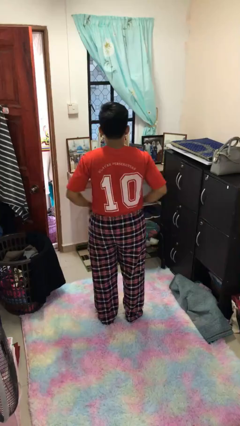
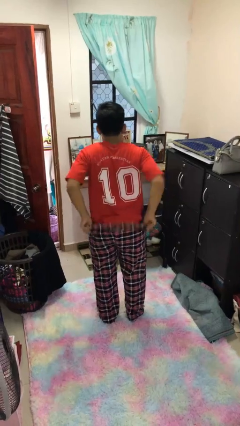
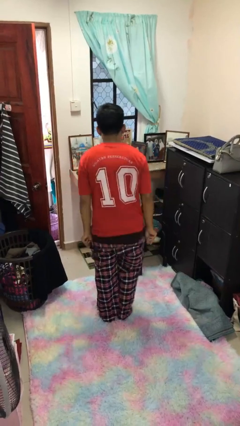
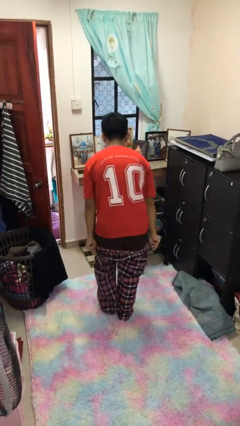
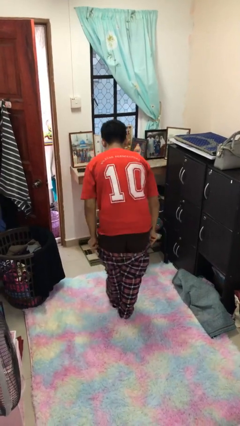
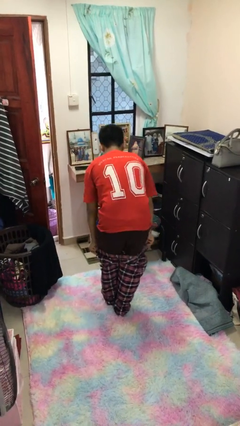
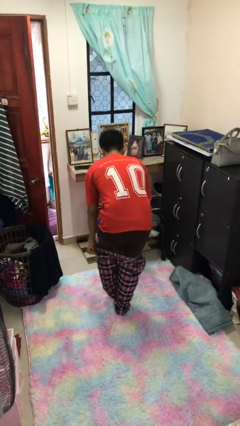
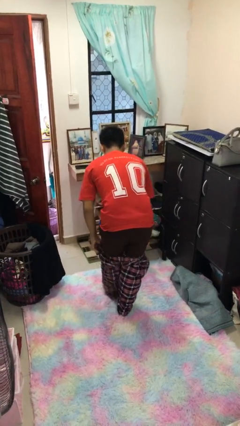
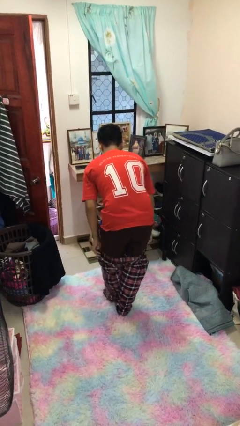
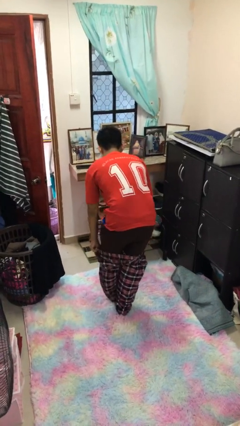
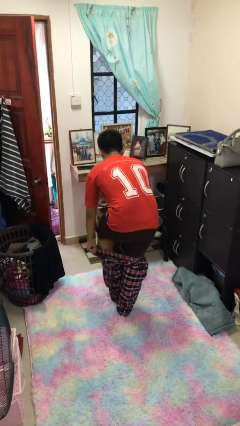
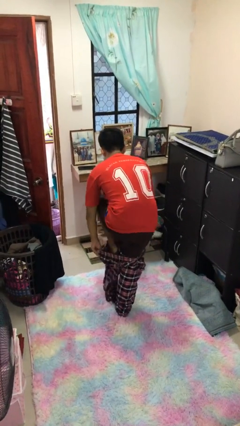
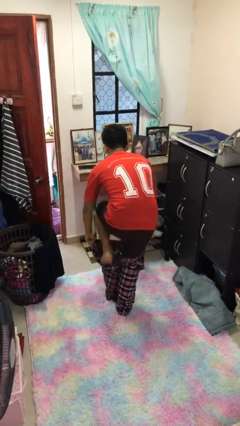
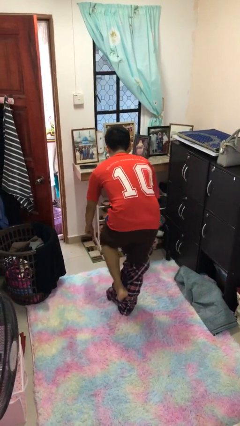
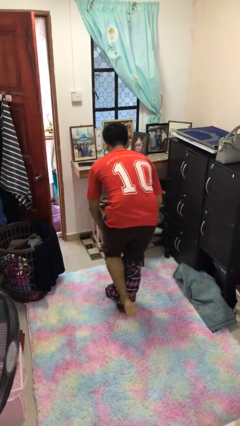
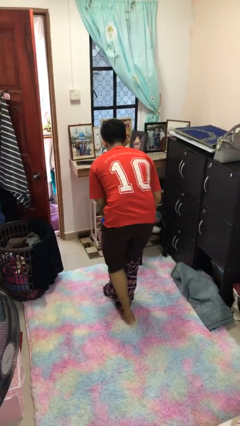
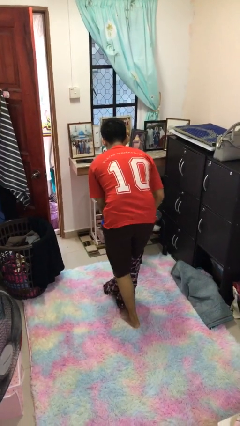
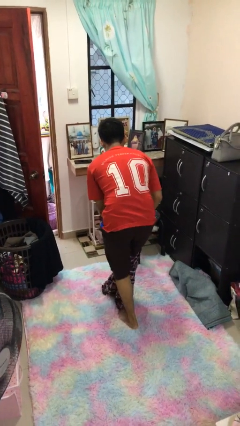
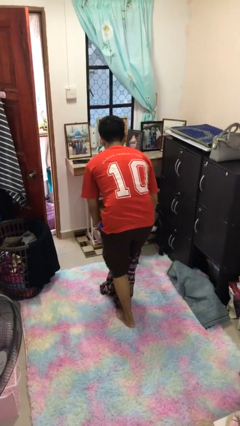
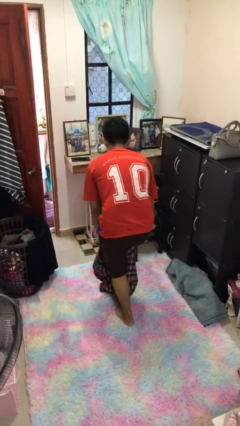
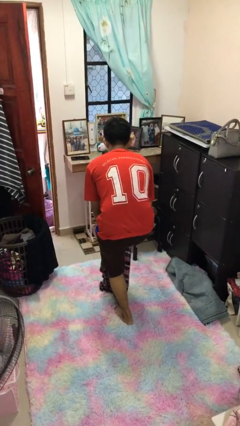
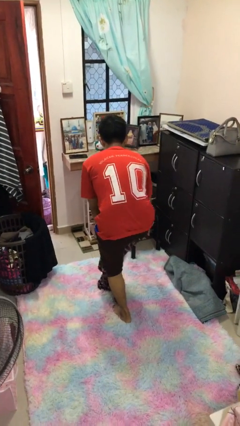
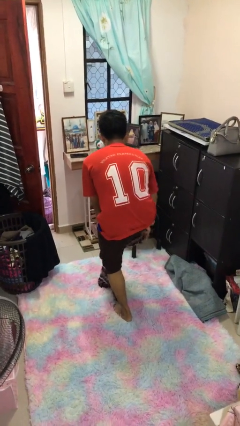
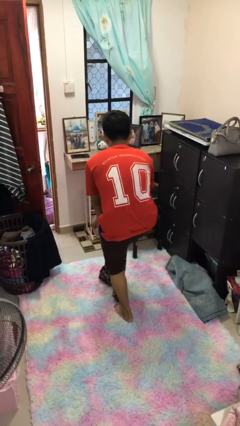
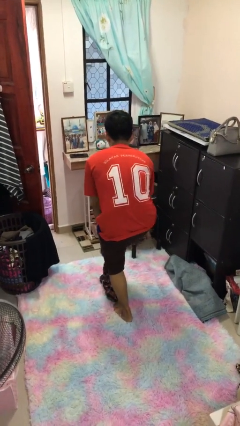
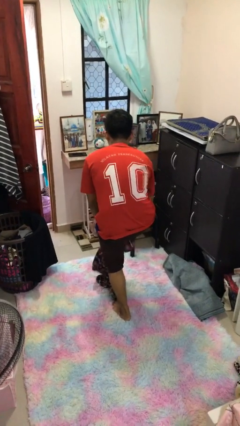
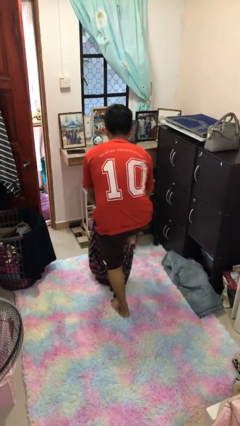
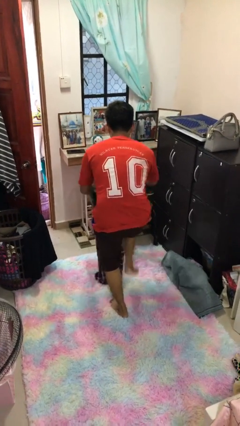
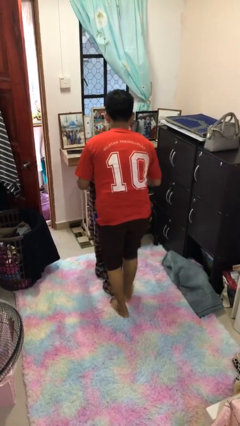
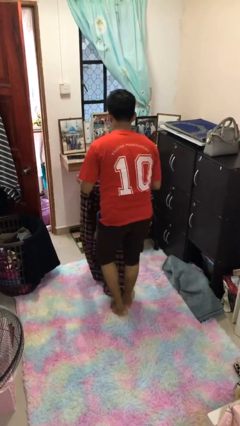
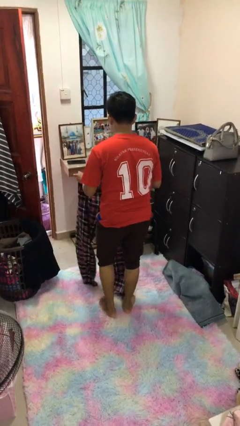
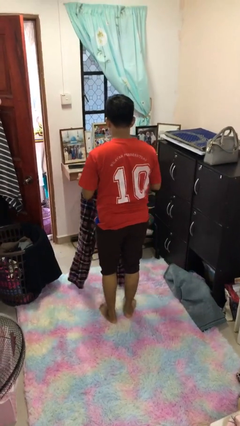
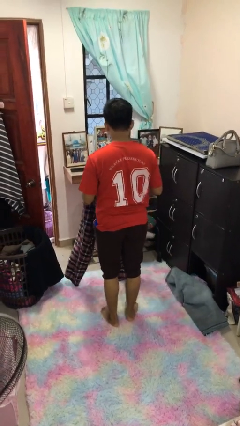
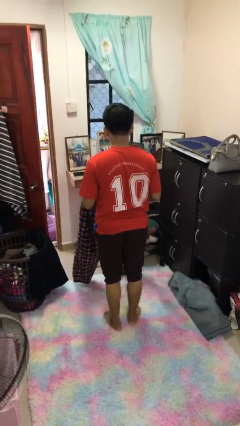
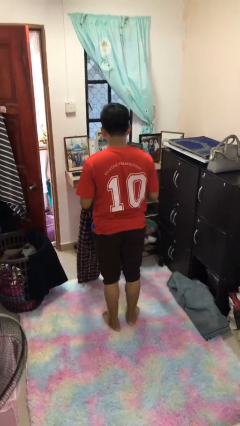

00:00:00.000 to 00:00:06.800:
person takes off pants

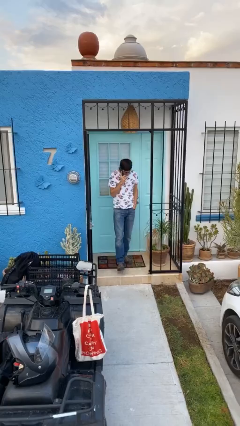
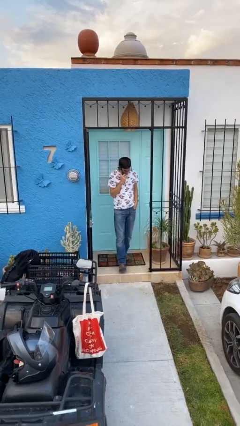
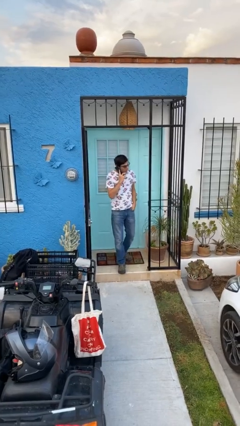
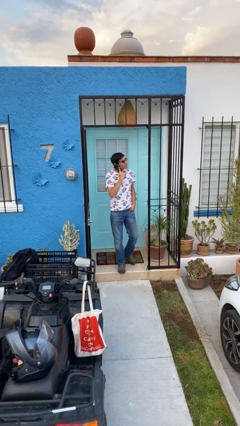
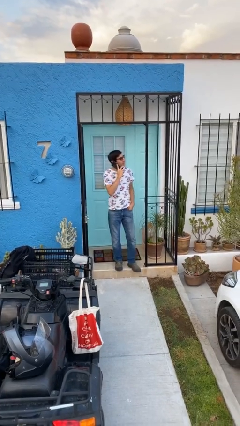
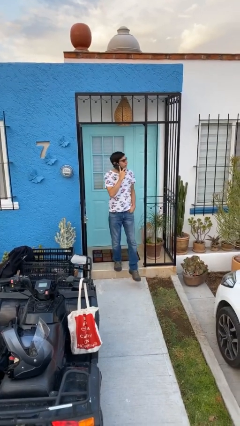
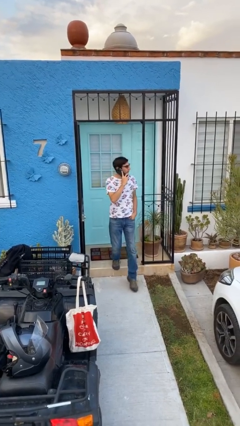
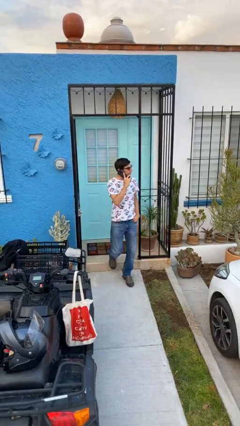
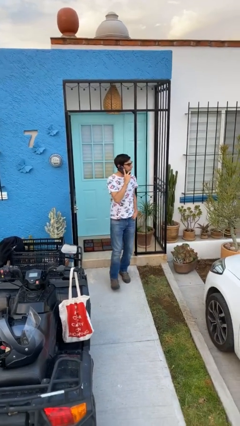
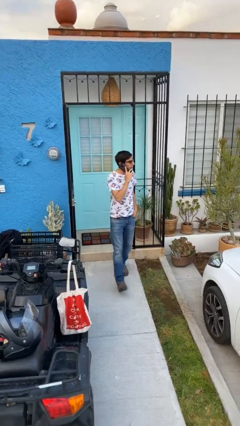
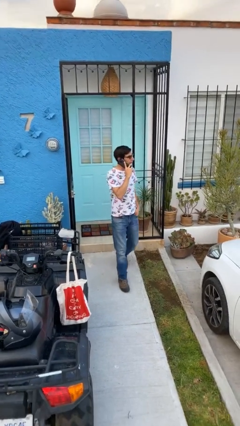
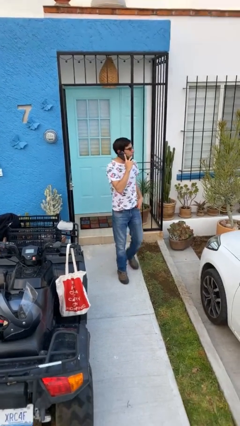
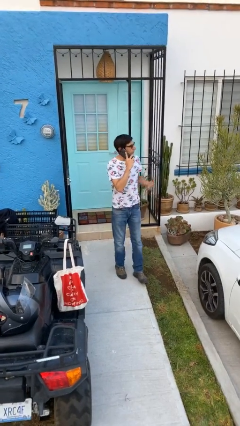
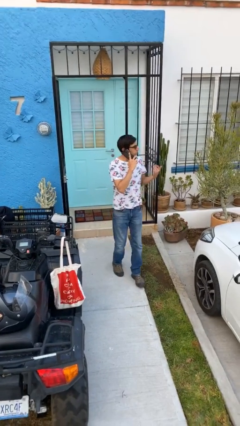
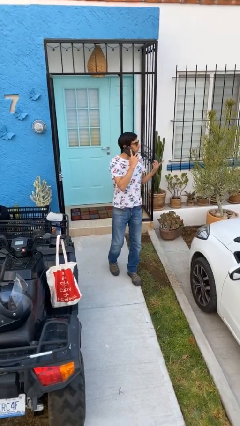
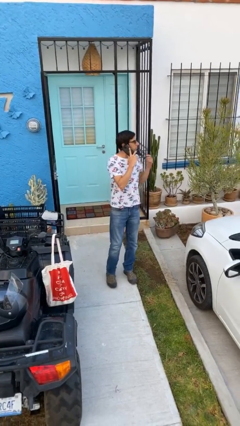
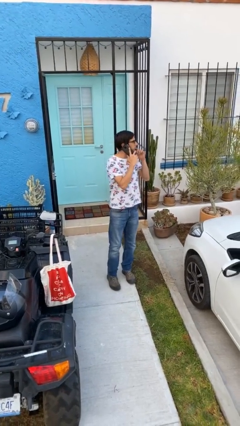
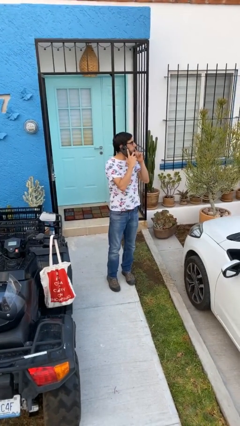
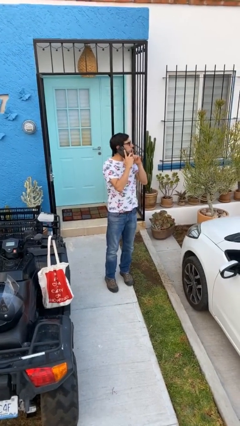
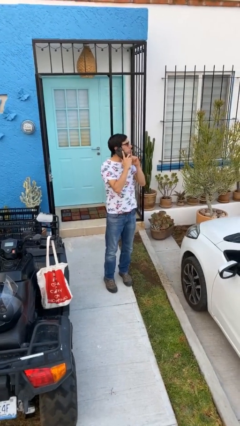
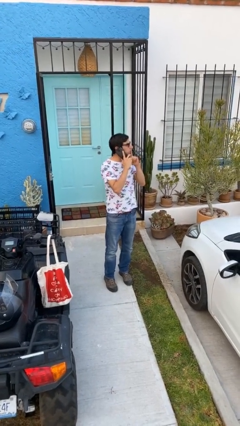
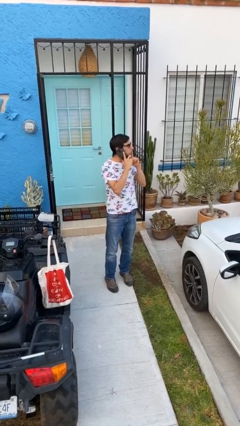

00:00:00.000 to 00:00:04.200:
person enters scene through structure

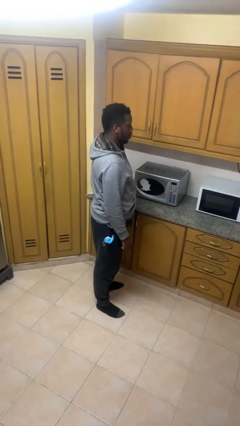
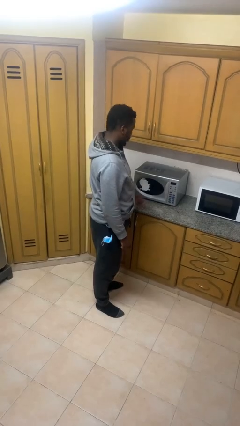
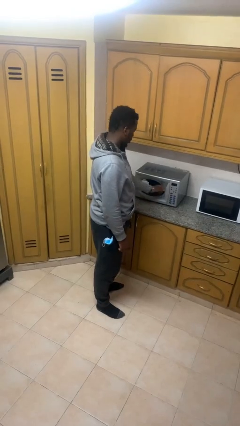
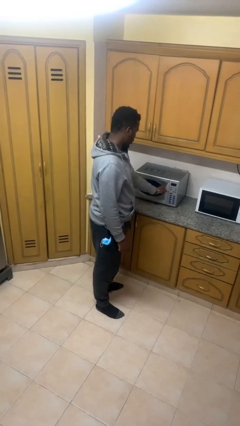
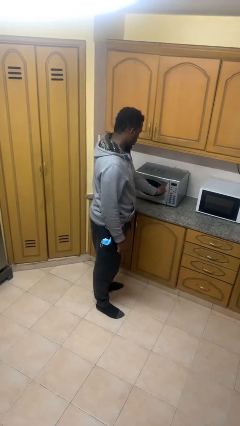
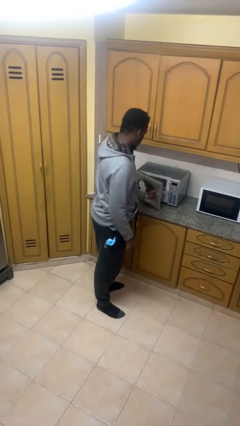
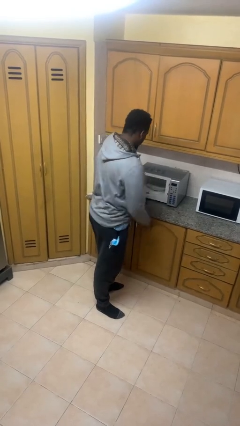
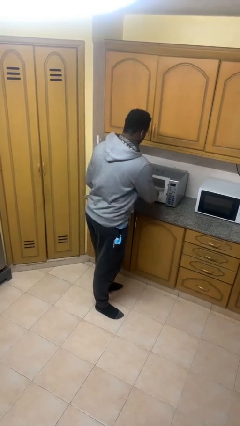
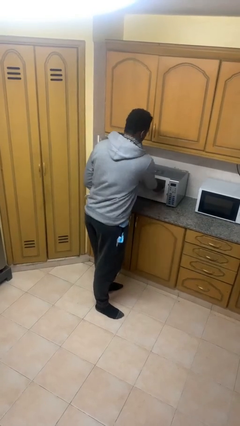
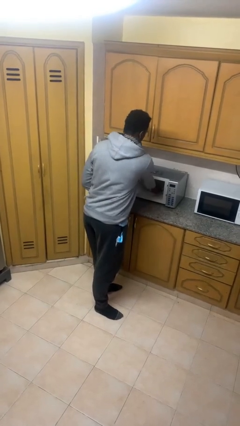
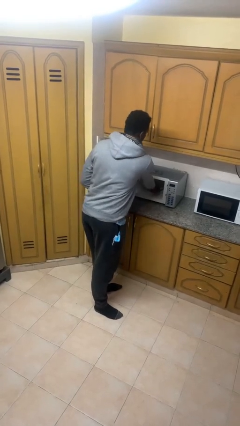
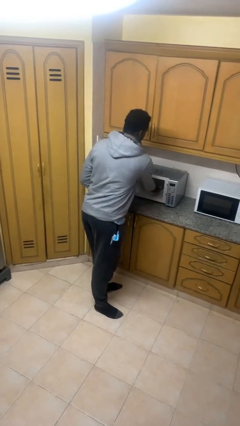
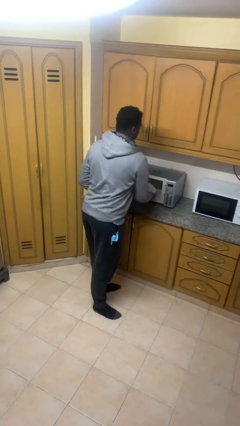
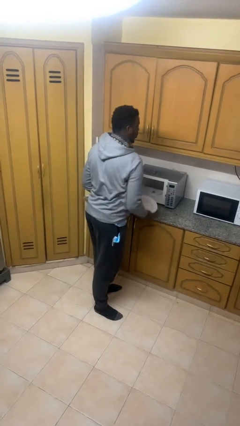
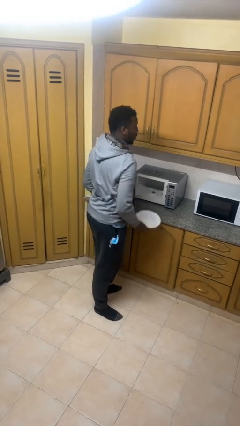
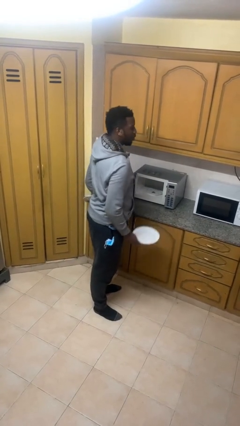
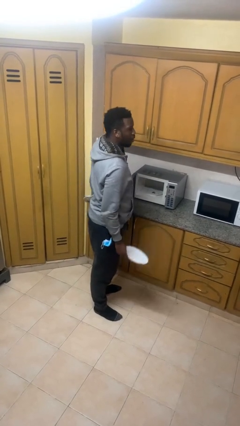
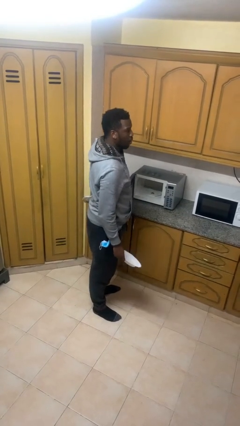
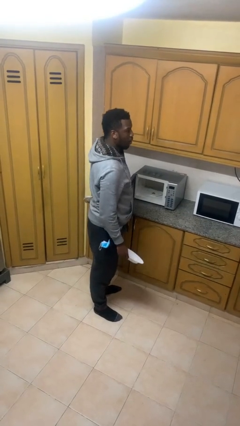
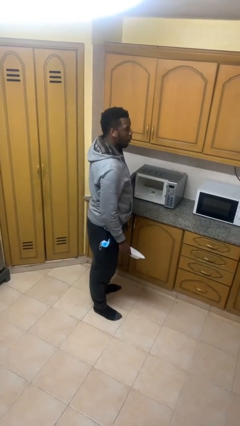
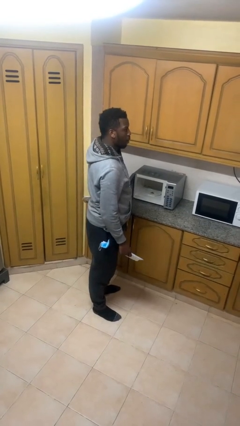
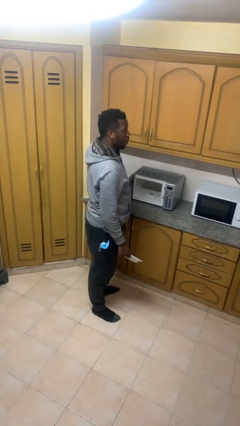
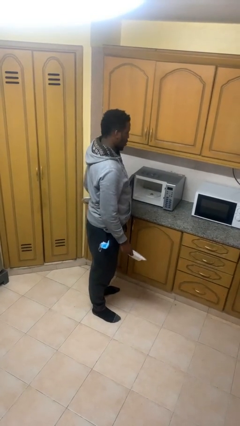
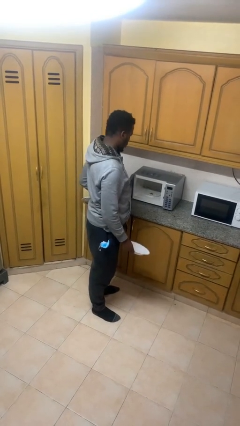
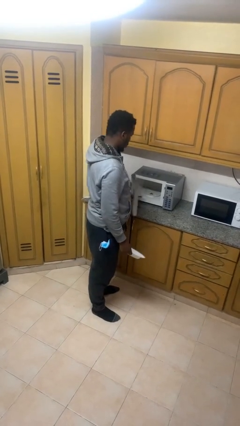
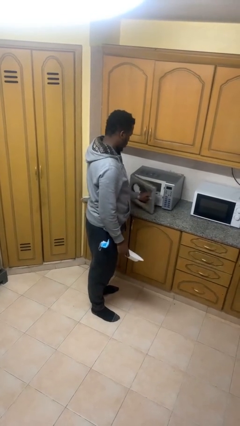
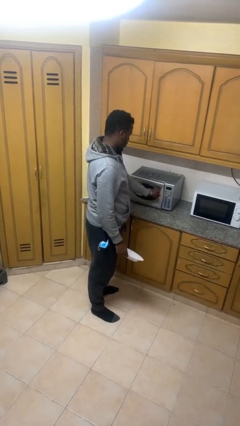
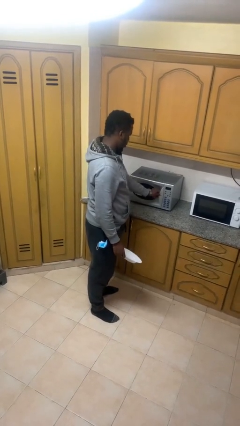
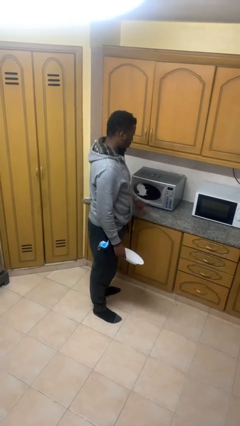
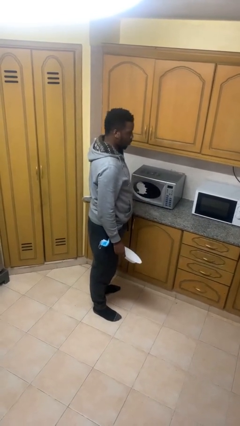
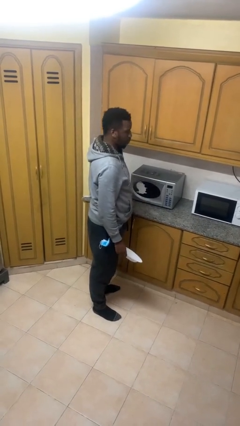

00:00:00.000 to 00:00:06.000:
person takes object from microwave

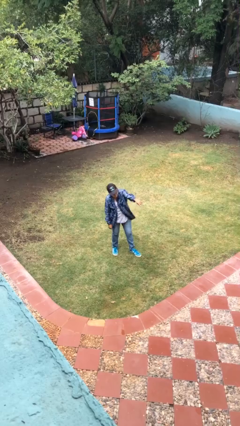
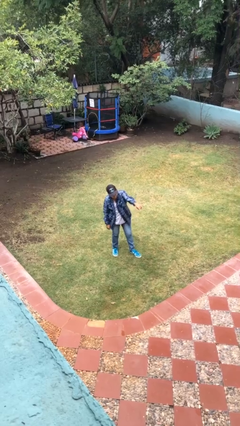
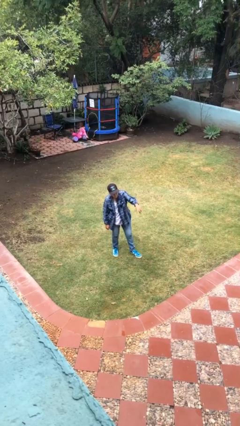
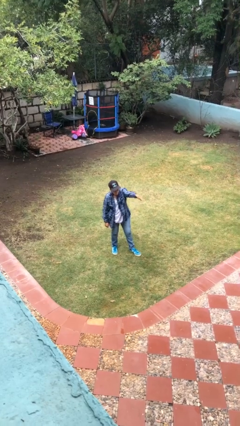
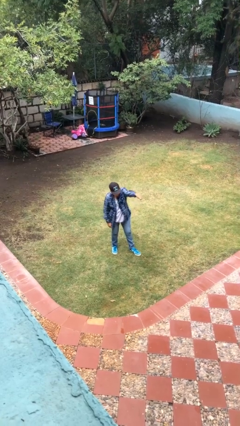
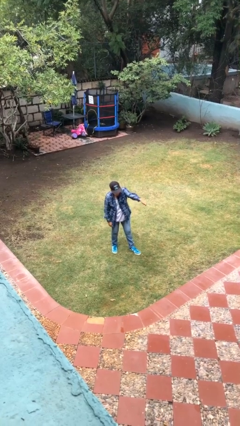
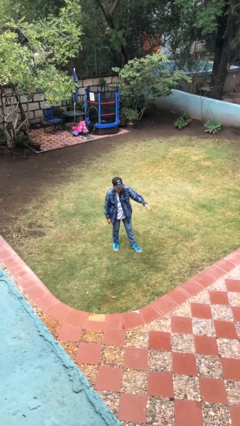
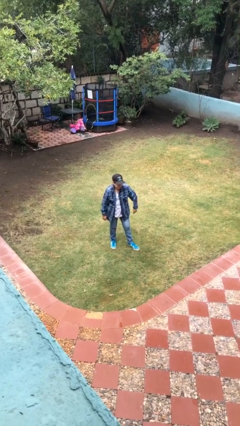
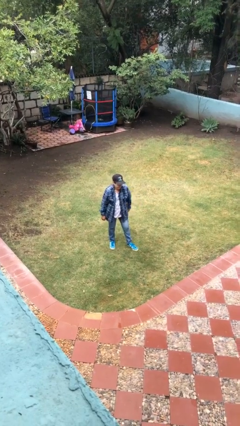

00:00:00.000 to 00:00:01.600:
person points at person
